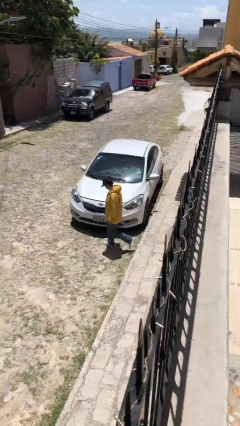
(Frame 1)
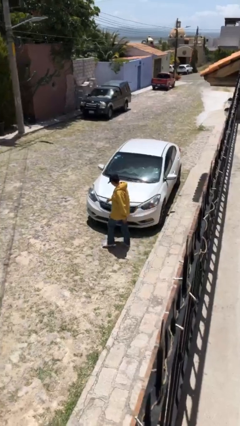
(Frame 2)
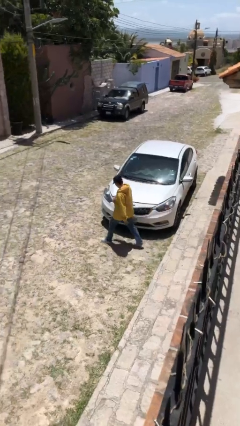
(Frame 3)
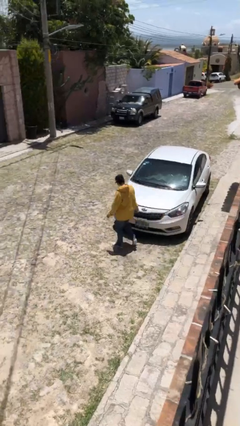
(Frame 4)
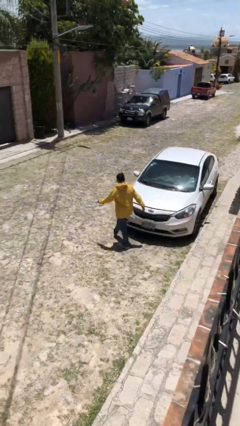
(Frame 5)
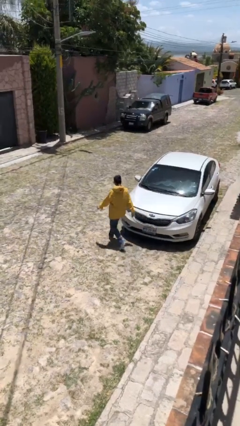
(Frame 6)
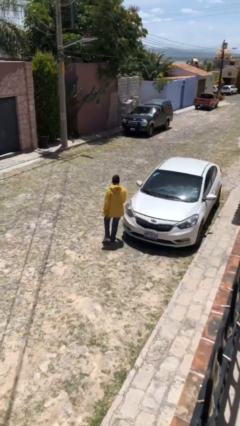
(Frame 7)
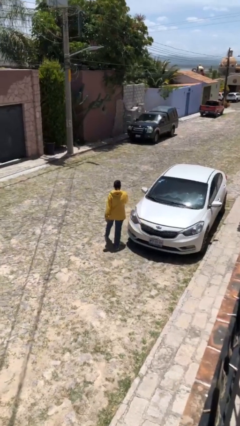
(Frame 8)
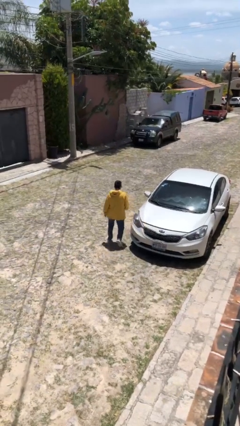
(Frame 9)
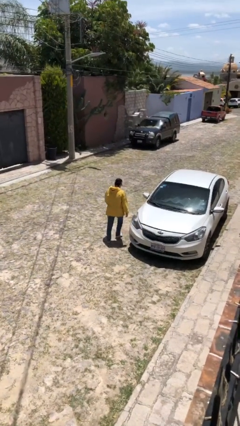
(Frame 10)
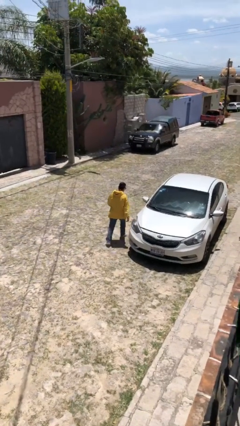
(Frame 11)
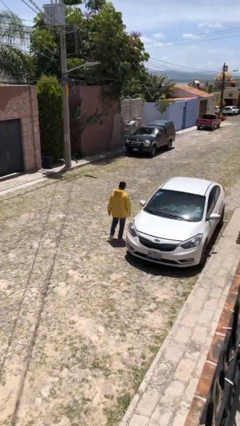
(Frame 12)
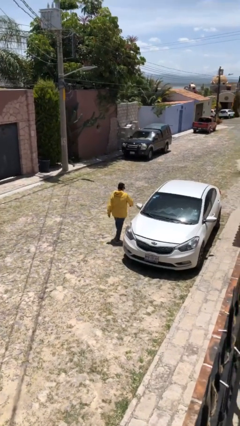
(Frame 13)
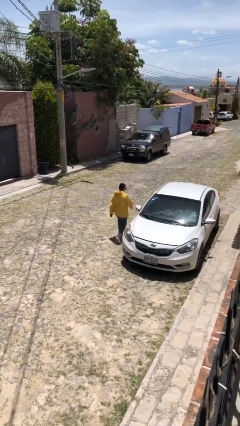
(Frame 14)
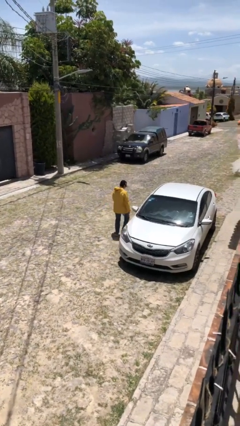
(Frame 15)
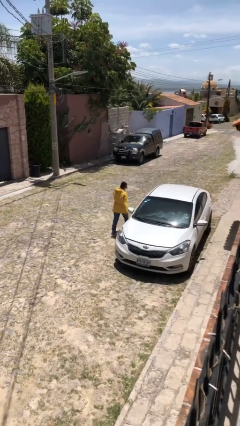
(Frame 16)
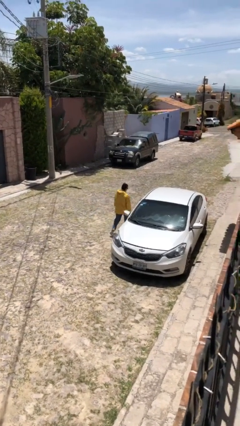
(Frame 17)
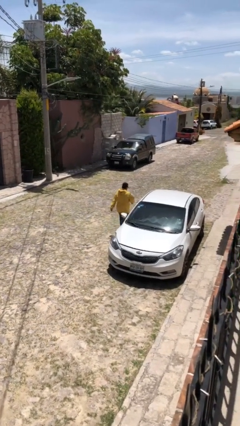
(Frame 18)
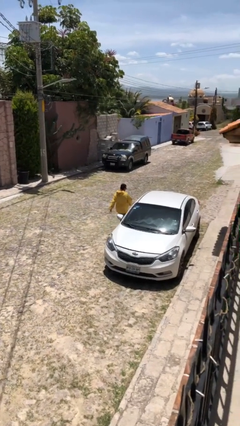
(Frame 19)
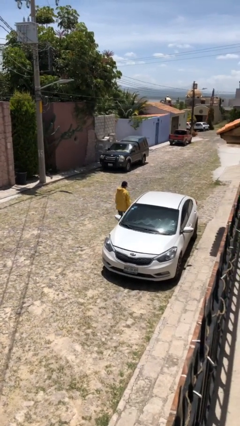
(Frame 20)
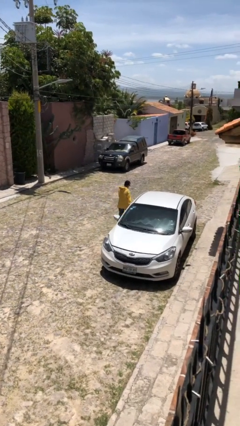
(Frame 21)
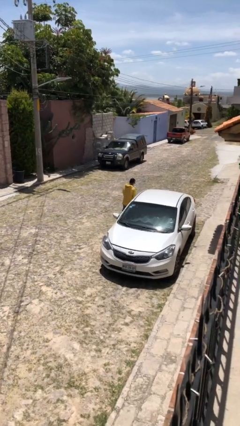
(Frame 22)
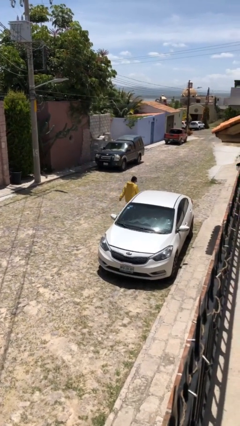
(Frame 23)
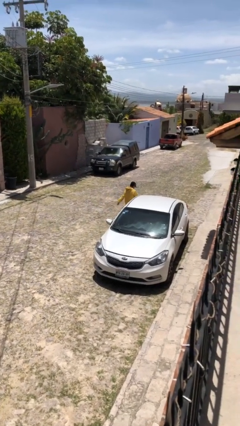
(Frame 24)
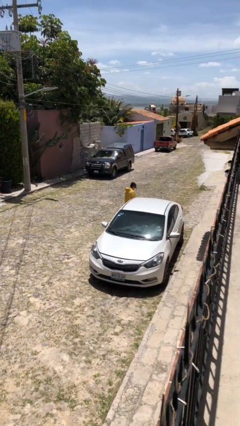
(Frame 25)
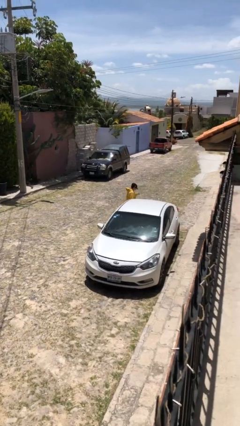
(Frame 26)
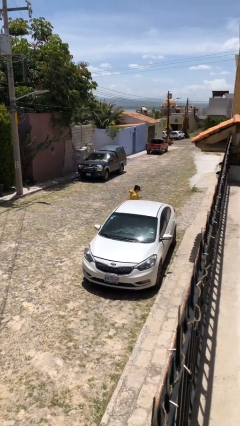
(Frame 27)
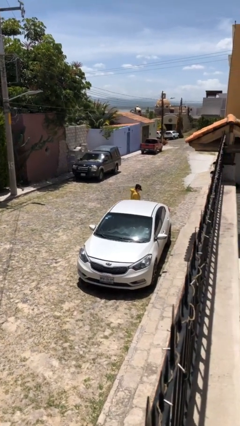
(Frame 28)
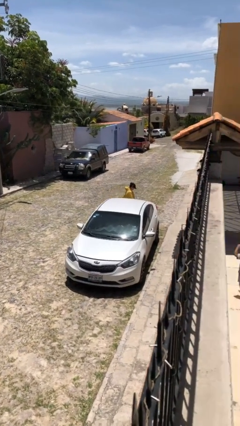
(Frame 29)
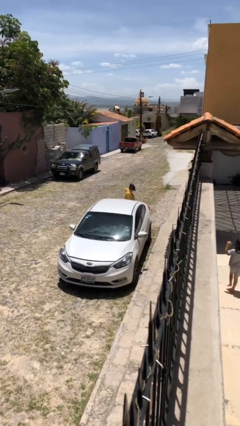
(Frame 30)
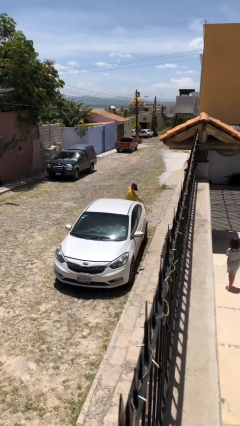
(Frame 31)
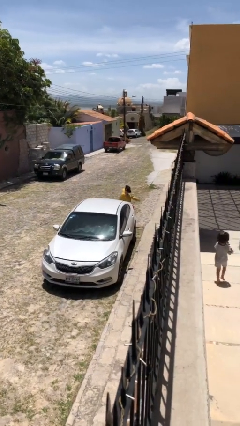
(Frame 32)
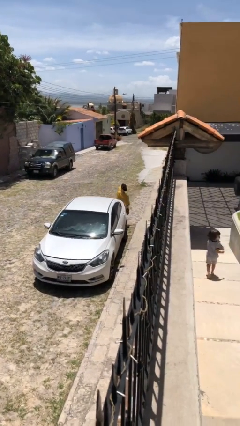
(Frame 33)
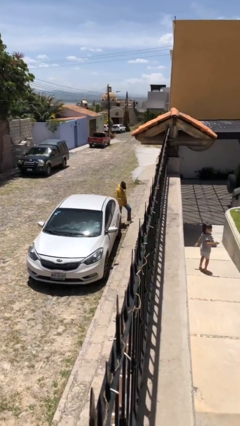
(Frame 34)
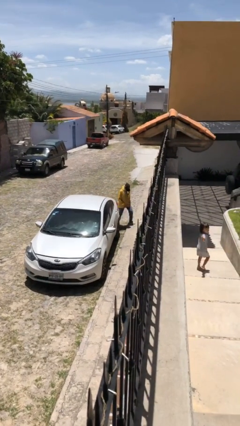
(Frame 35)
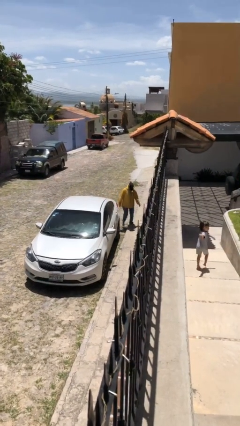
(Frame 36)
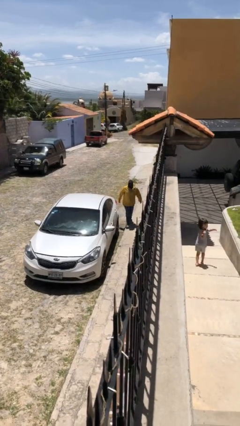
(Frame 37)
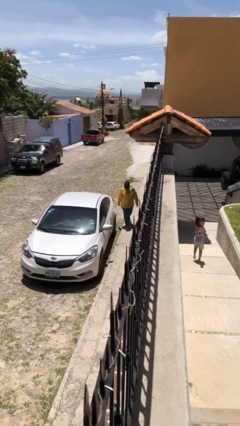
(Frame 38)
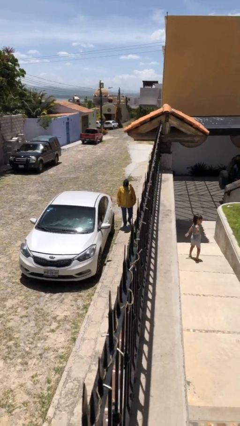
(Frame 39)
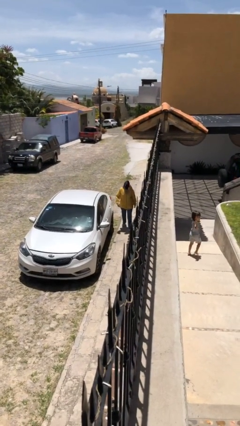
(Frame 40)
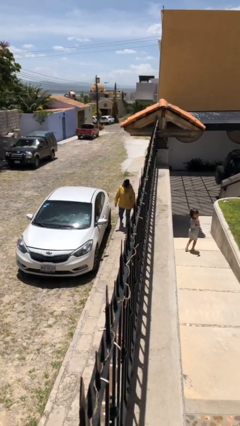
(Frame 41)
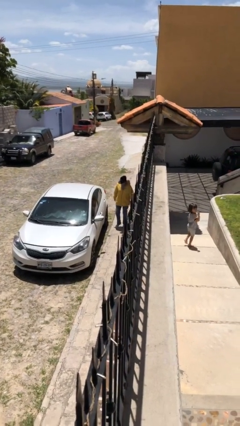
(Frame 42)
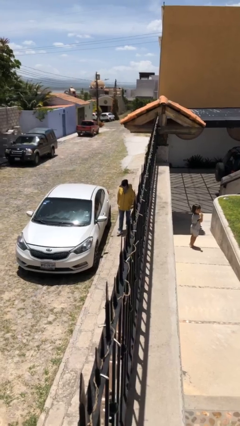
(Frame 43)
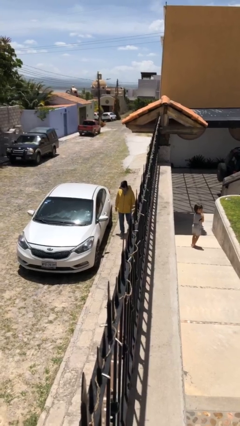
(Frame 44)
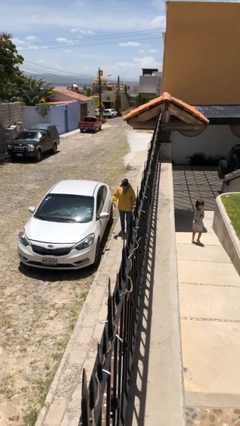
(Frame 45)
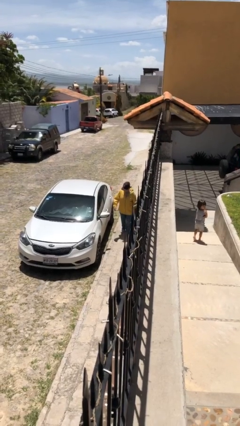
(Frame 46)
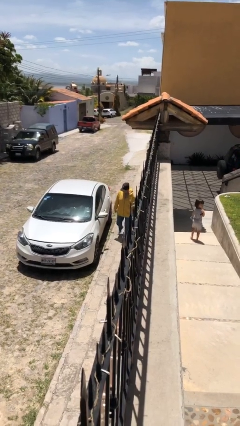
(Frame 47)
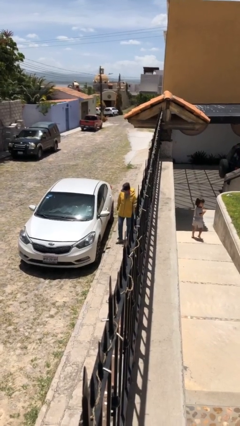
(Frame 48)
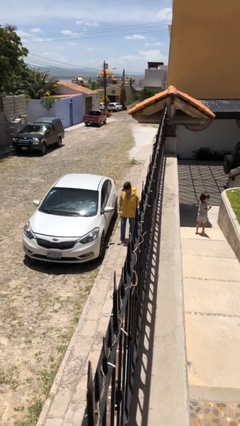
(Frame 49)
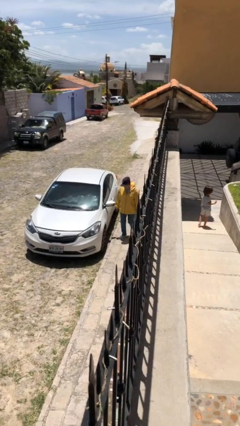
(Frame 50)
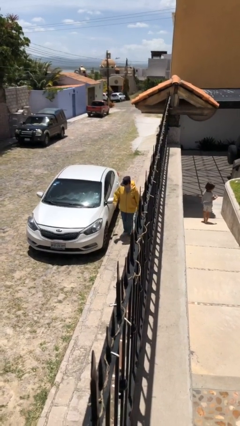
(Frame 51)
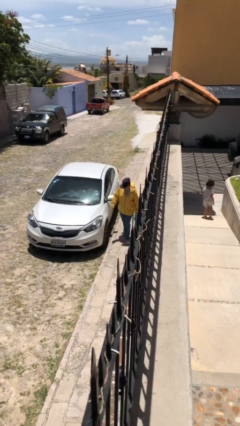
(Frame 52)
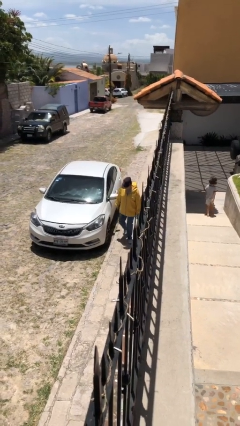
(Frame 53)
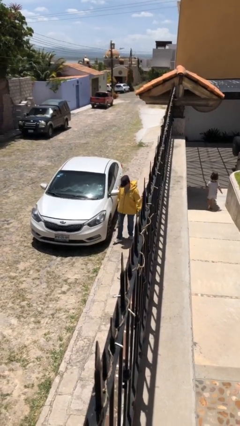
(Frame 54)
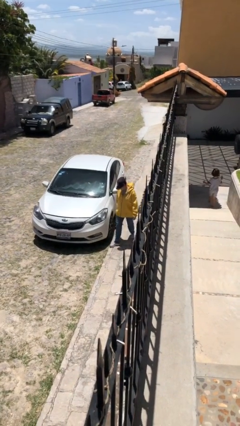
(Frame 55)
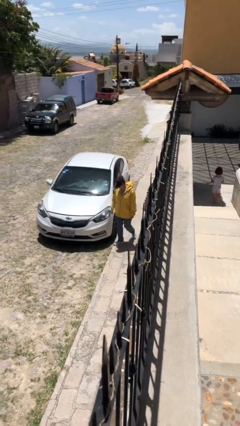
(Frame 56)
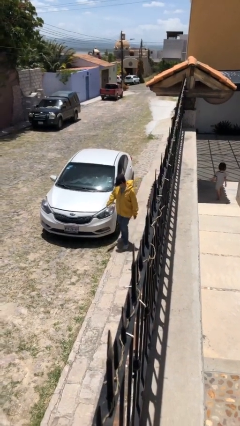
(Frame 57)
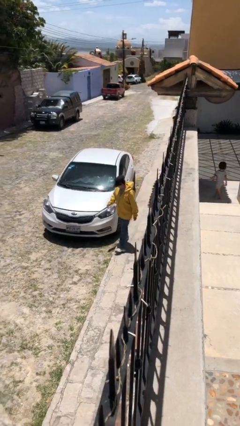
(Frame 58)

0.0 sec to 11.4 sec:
person walks around car

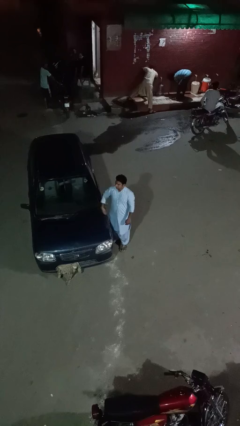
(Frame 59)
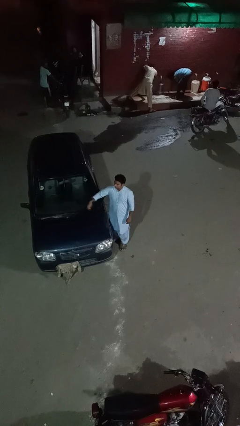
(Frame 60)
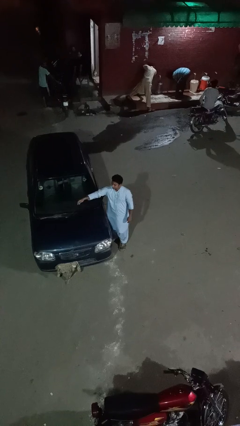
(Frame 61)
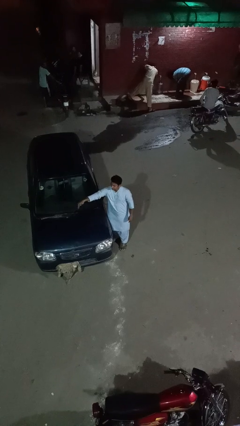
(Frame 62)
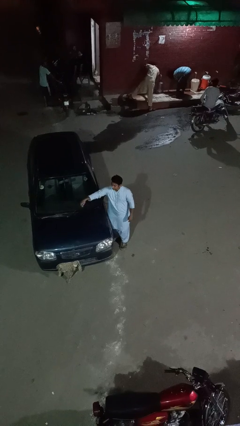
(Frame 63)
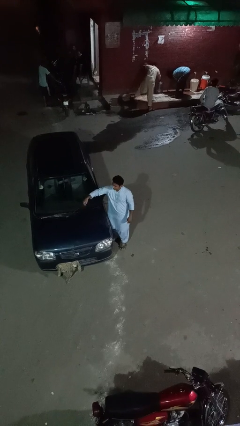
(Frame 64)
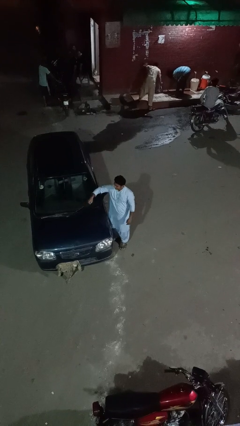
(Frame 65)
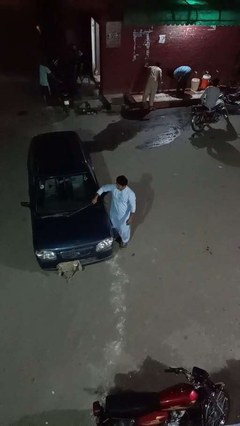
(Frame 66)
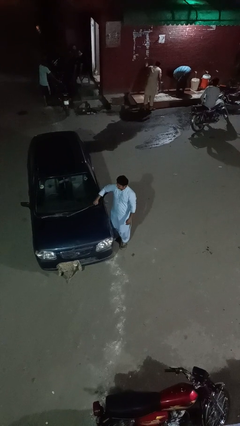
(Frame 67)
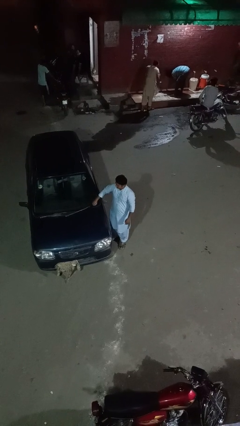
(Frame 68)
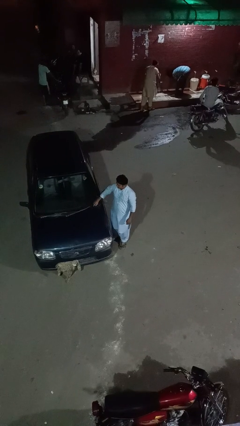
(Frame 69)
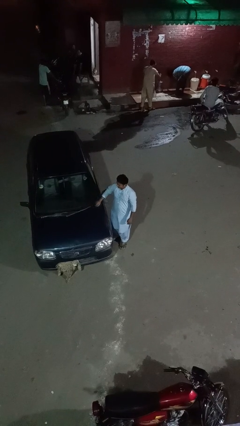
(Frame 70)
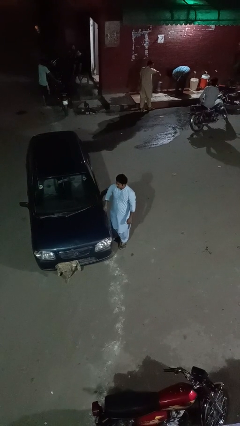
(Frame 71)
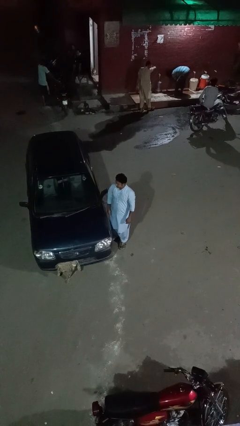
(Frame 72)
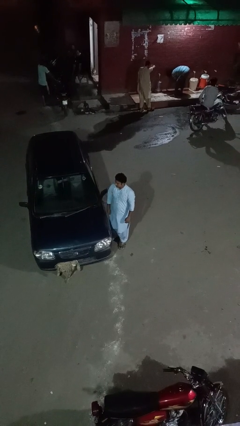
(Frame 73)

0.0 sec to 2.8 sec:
person flips down car wipers

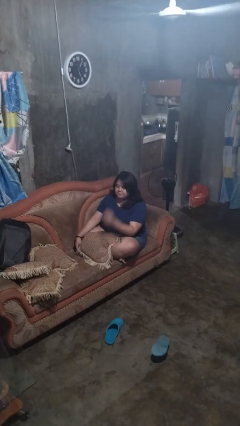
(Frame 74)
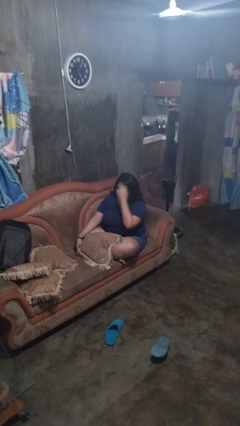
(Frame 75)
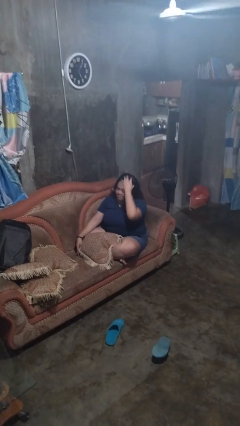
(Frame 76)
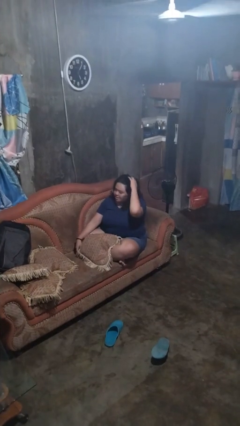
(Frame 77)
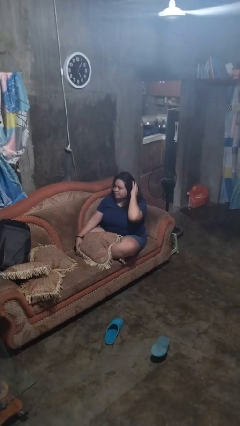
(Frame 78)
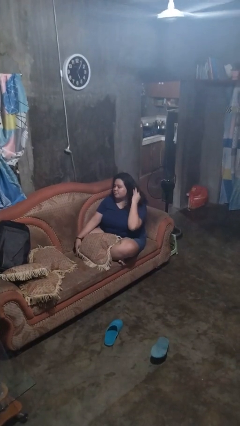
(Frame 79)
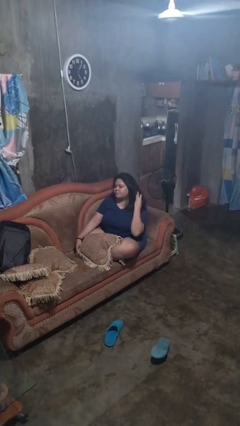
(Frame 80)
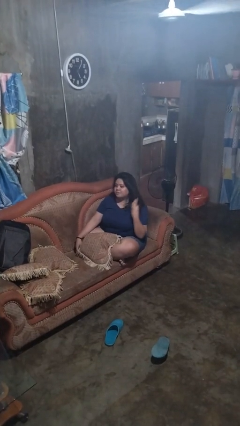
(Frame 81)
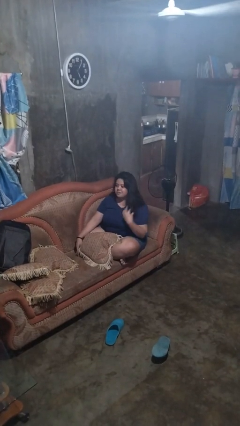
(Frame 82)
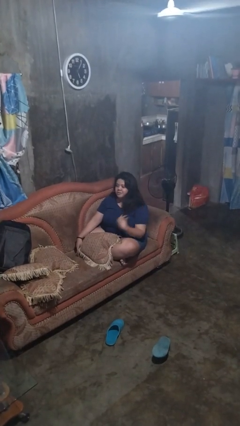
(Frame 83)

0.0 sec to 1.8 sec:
person strokes hair

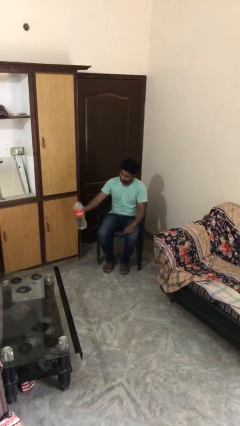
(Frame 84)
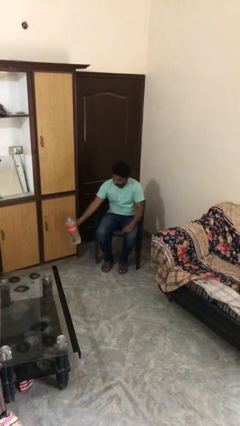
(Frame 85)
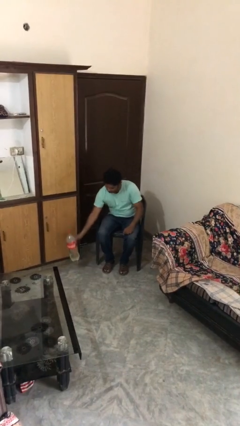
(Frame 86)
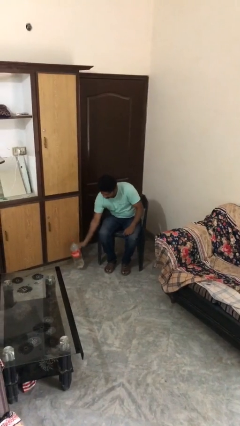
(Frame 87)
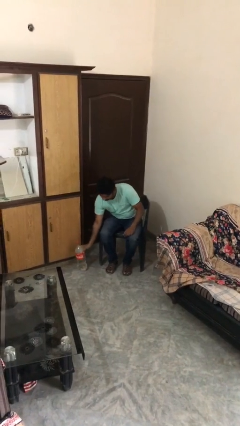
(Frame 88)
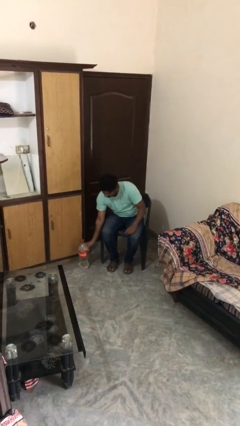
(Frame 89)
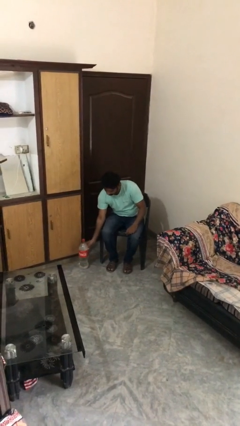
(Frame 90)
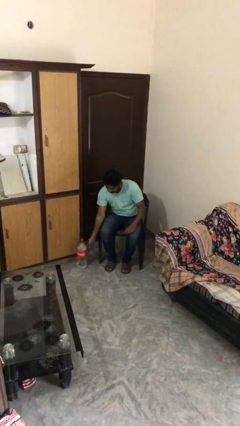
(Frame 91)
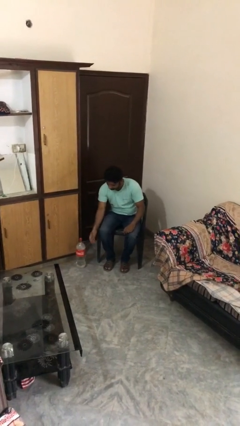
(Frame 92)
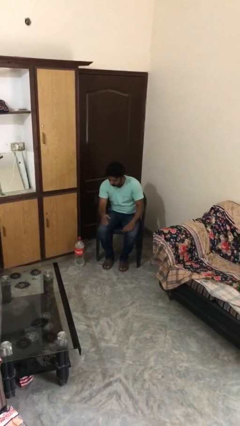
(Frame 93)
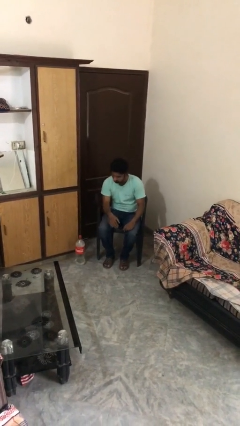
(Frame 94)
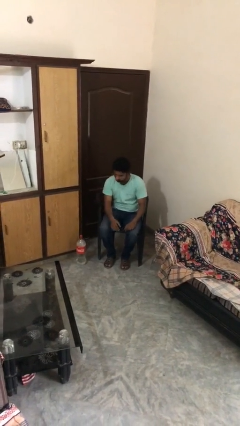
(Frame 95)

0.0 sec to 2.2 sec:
person puts down object on floor
